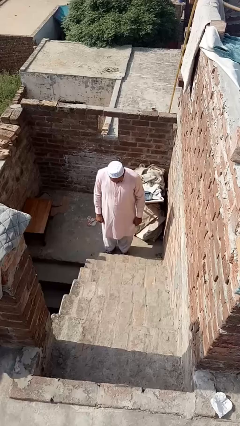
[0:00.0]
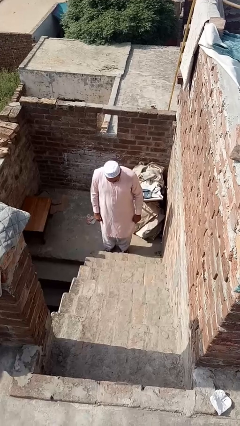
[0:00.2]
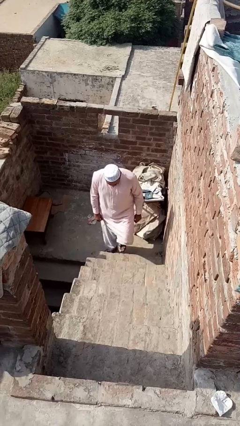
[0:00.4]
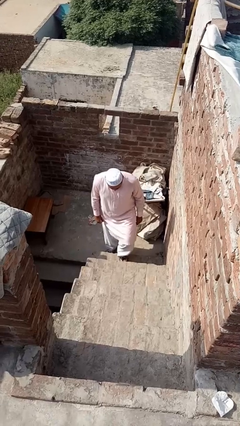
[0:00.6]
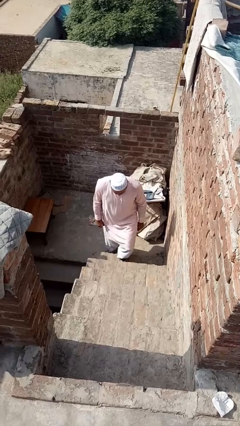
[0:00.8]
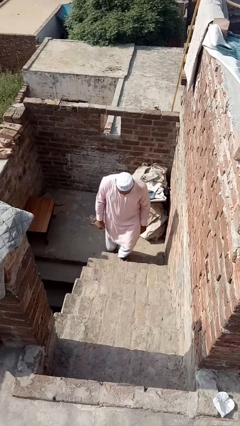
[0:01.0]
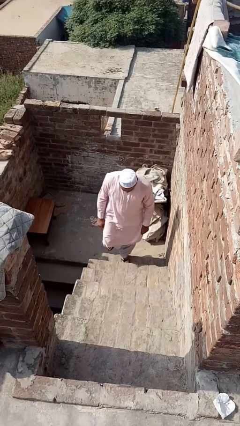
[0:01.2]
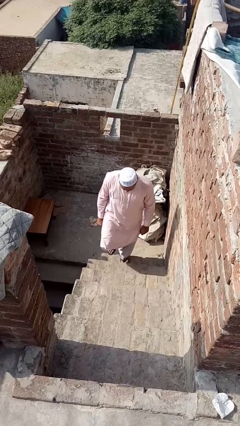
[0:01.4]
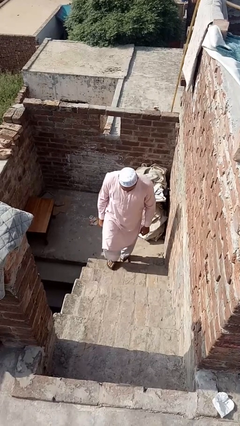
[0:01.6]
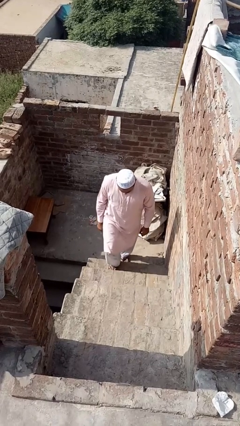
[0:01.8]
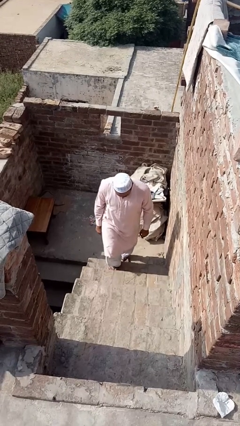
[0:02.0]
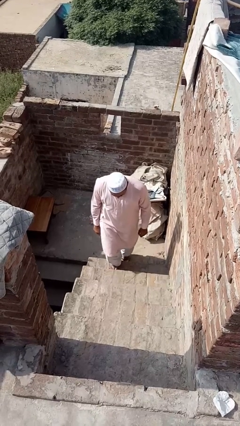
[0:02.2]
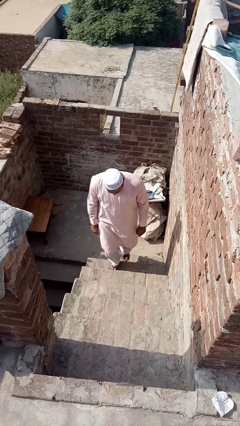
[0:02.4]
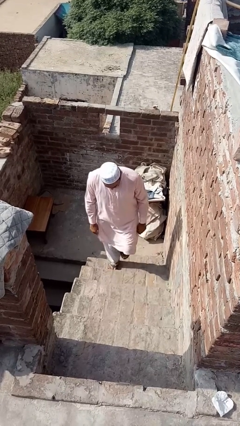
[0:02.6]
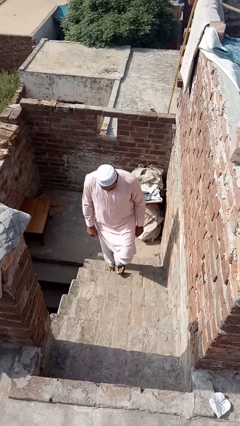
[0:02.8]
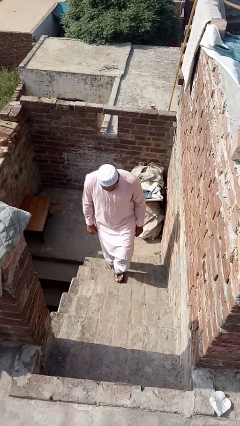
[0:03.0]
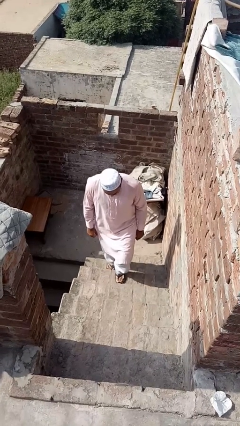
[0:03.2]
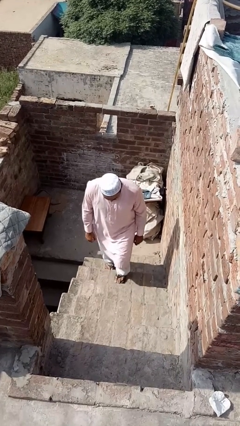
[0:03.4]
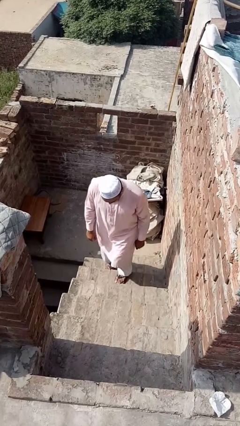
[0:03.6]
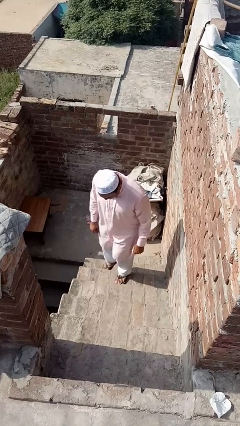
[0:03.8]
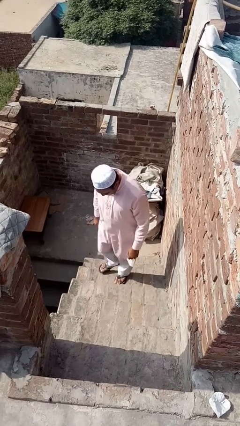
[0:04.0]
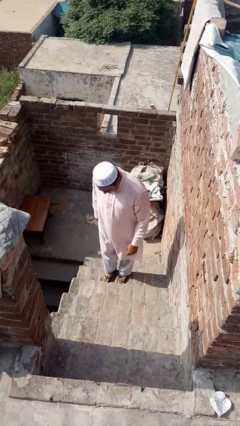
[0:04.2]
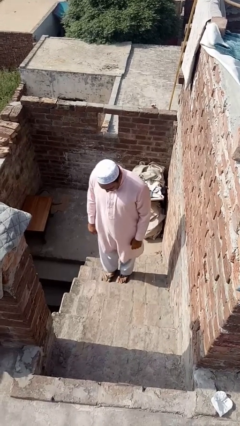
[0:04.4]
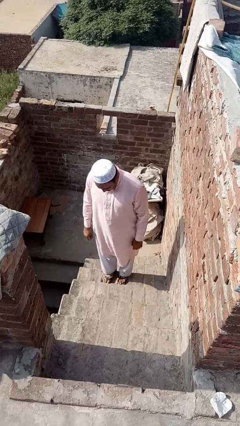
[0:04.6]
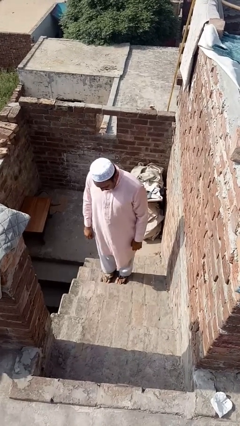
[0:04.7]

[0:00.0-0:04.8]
person climbs up ladder

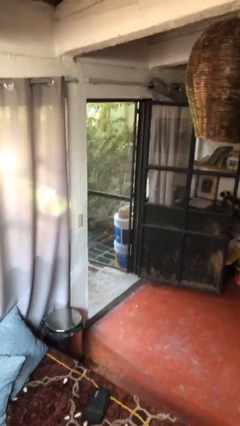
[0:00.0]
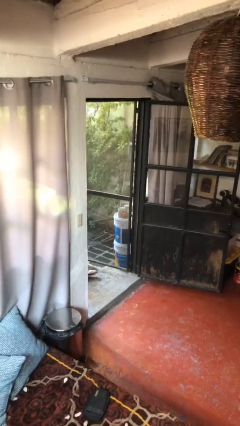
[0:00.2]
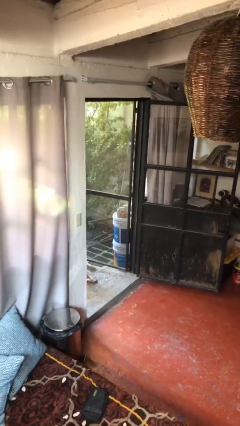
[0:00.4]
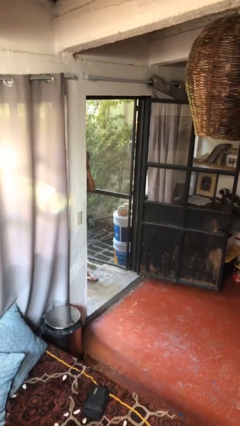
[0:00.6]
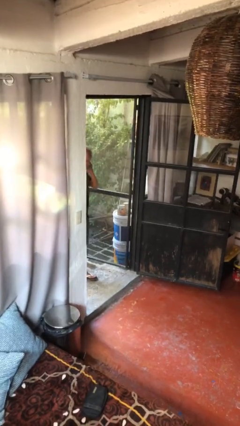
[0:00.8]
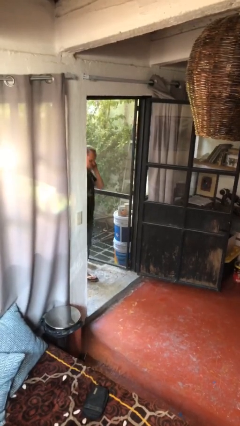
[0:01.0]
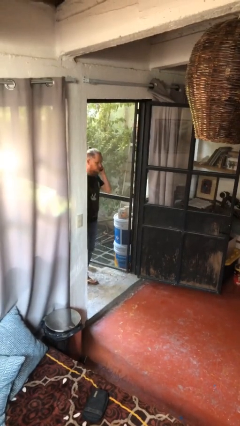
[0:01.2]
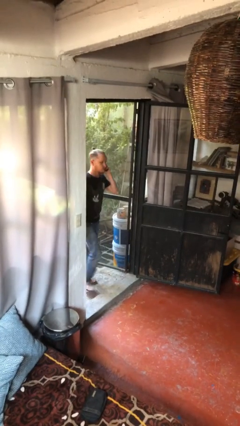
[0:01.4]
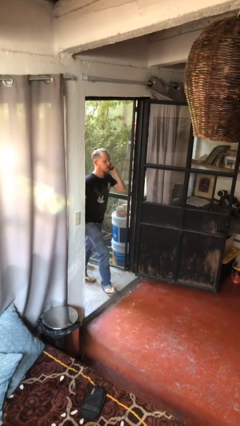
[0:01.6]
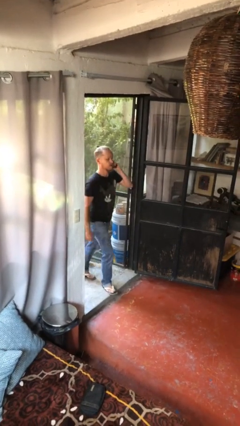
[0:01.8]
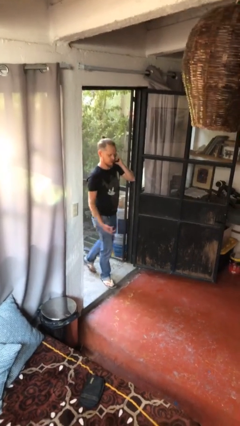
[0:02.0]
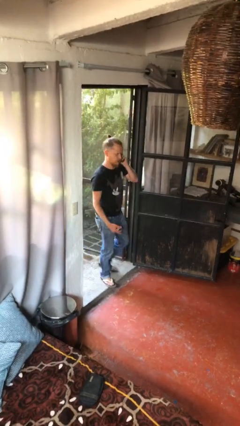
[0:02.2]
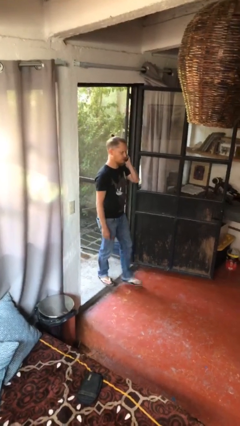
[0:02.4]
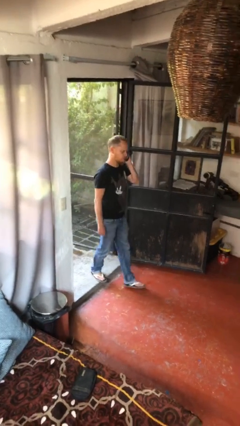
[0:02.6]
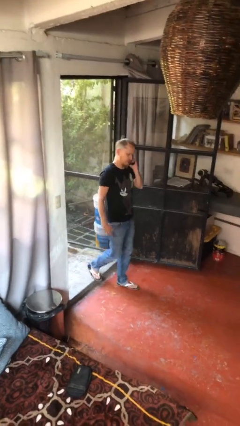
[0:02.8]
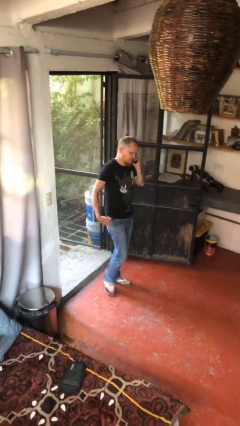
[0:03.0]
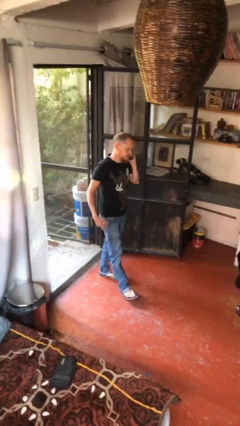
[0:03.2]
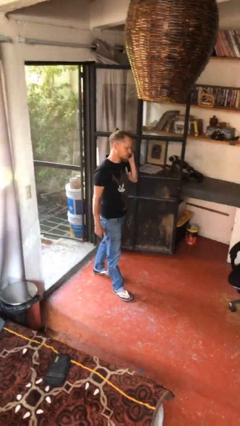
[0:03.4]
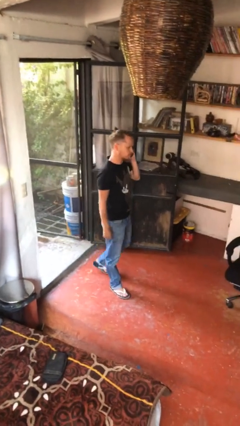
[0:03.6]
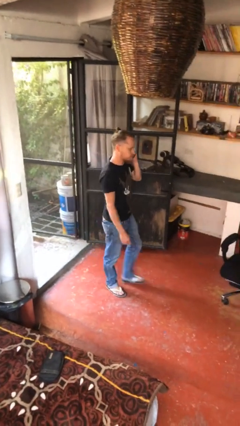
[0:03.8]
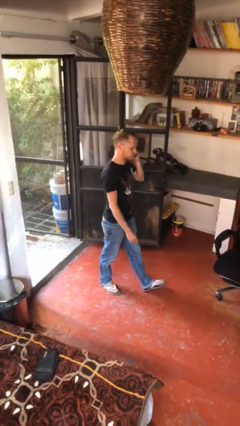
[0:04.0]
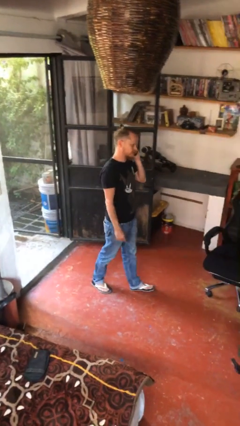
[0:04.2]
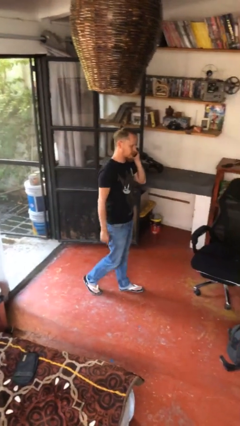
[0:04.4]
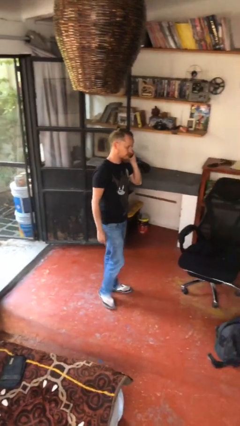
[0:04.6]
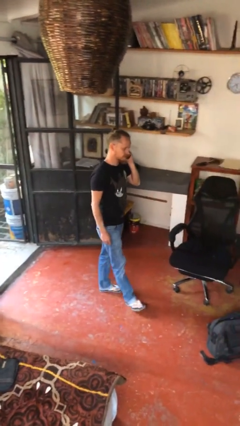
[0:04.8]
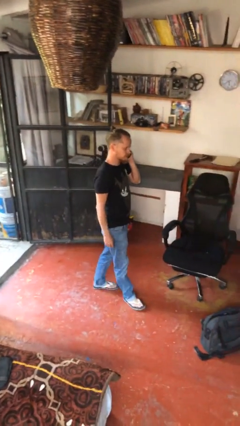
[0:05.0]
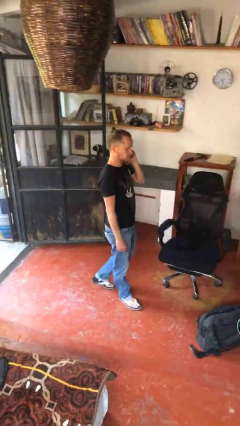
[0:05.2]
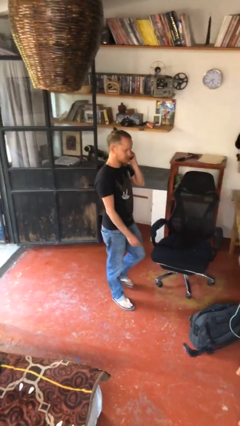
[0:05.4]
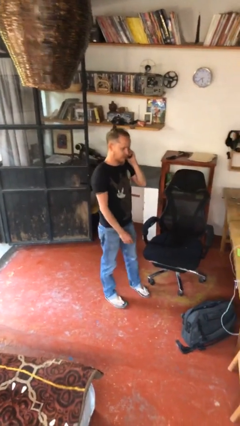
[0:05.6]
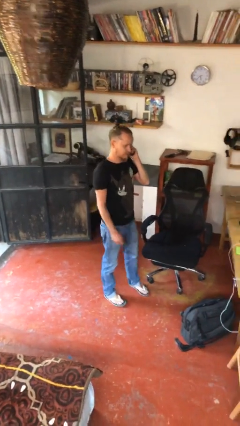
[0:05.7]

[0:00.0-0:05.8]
person enters scene through structure

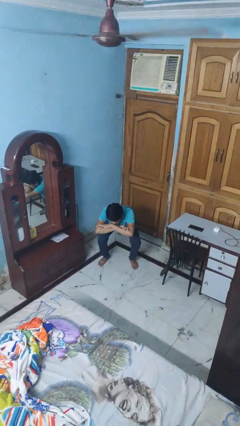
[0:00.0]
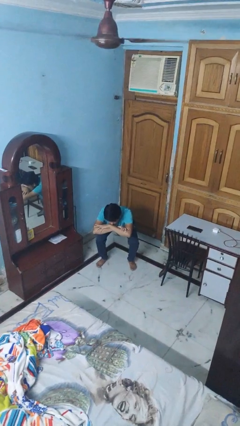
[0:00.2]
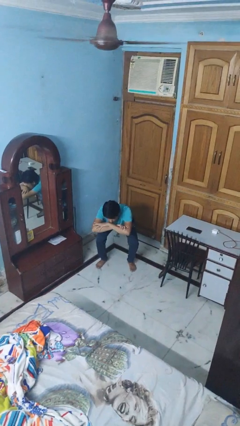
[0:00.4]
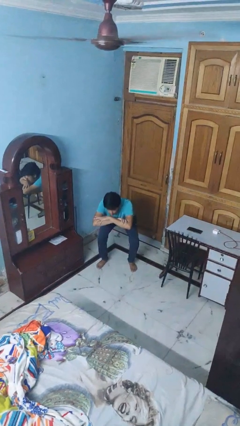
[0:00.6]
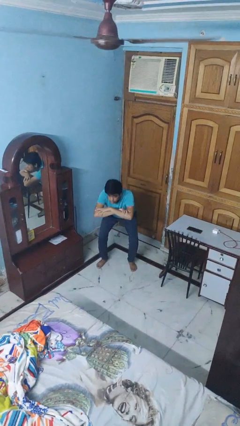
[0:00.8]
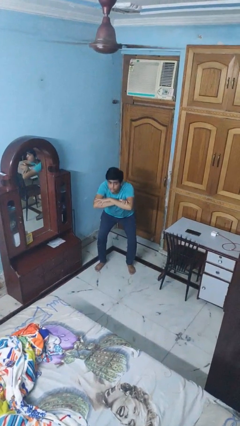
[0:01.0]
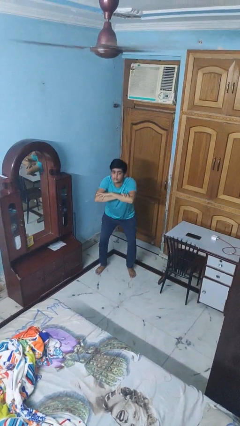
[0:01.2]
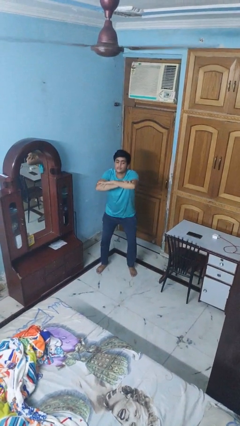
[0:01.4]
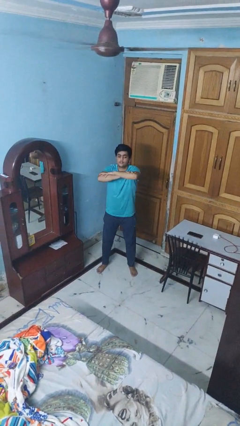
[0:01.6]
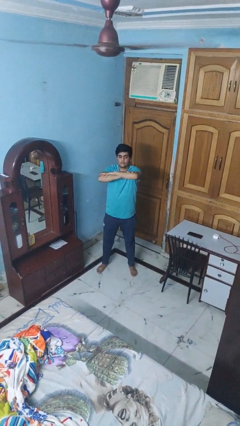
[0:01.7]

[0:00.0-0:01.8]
person stands up

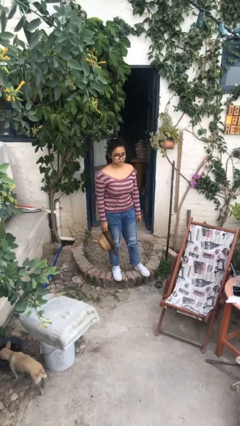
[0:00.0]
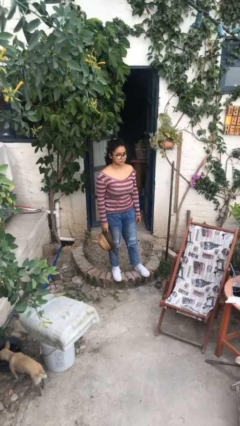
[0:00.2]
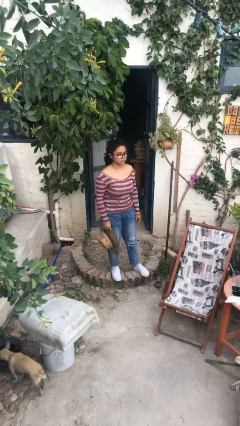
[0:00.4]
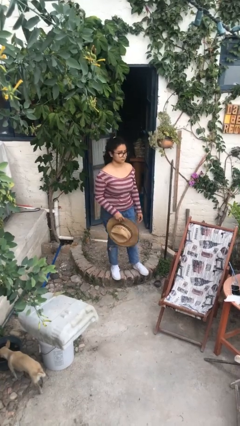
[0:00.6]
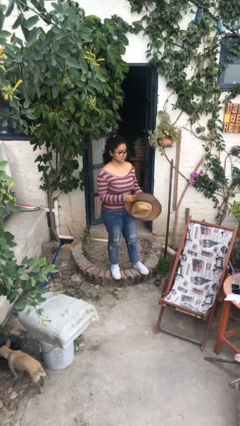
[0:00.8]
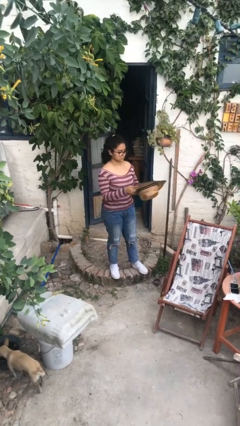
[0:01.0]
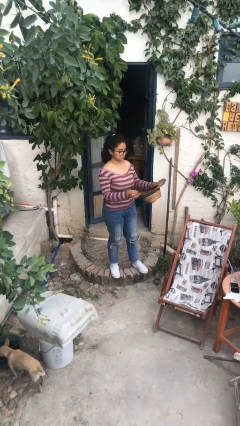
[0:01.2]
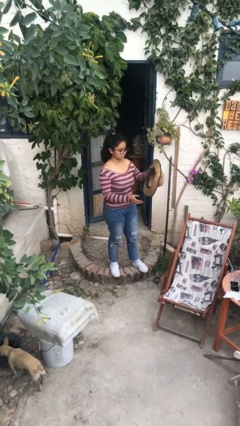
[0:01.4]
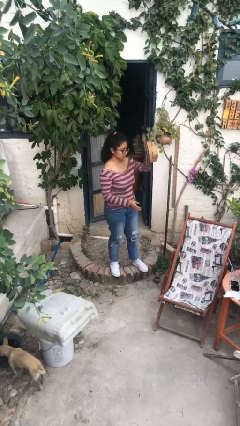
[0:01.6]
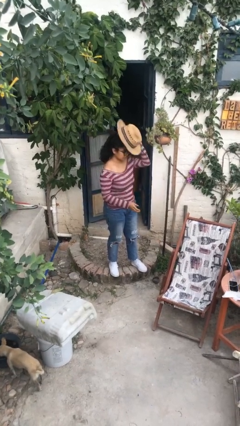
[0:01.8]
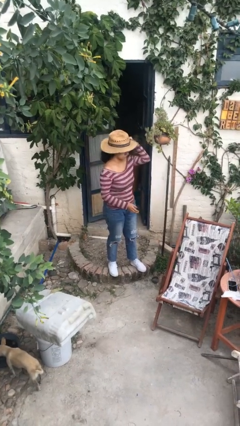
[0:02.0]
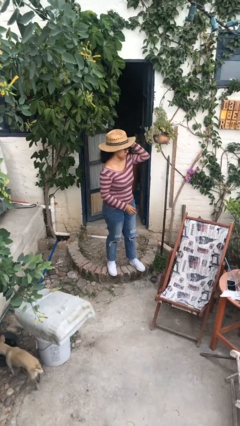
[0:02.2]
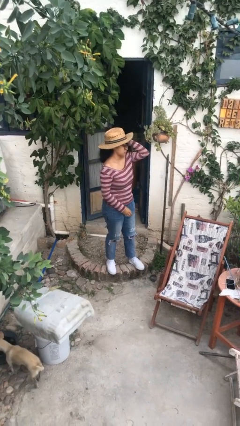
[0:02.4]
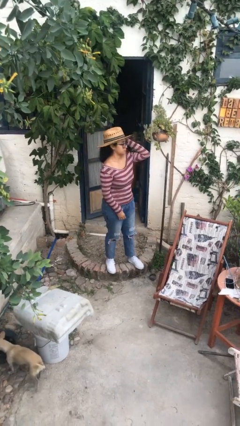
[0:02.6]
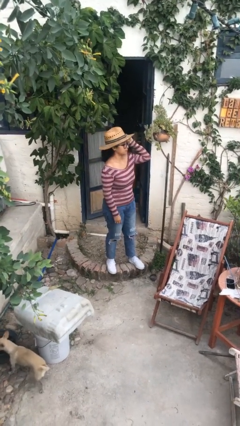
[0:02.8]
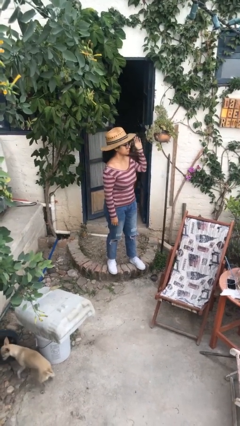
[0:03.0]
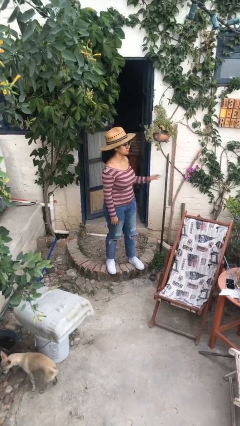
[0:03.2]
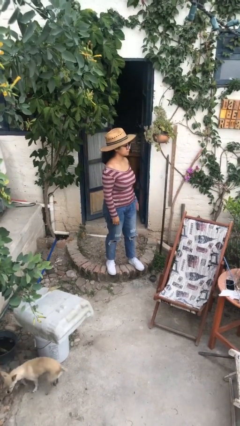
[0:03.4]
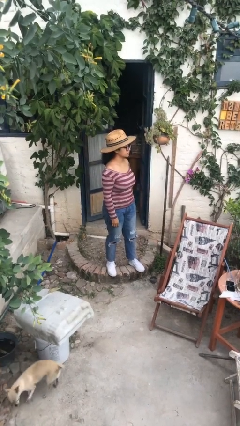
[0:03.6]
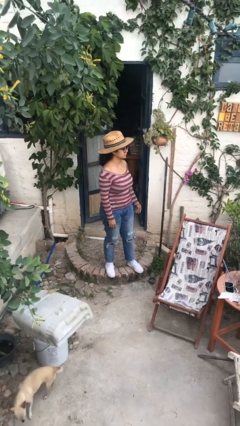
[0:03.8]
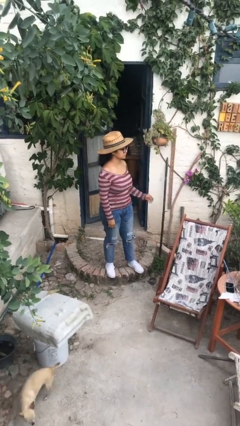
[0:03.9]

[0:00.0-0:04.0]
person puts on hat

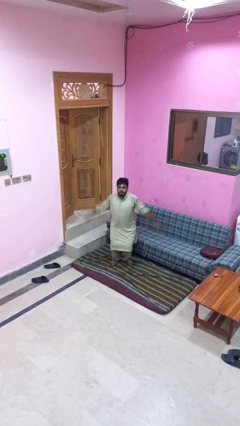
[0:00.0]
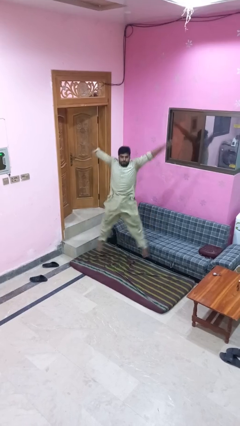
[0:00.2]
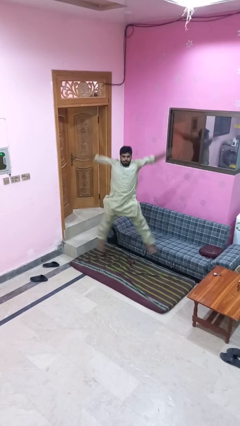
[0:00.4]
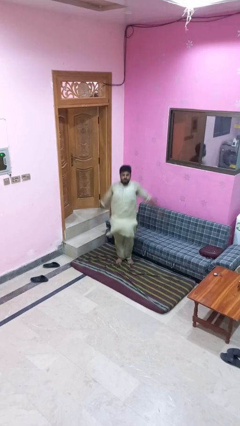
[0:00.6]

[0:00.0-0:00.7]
person exercises with jumping jacks

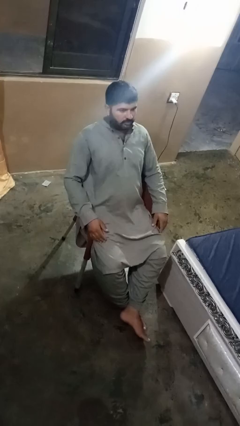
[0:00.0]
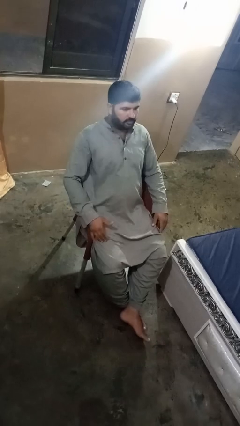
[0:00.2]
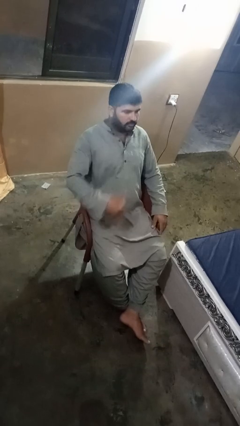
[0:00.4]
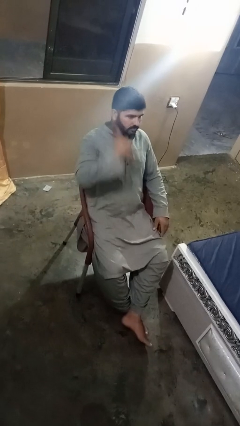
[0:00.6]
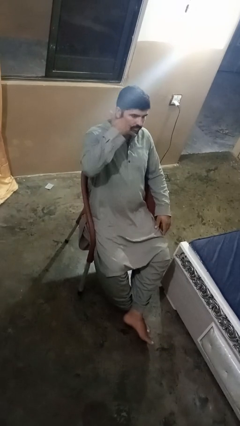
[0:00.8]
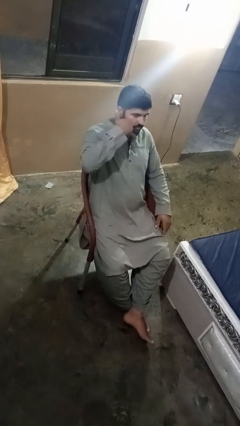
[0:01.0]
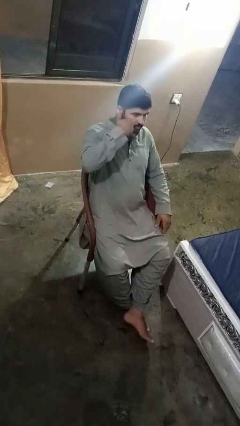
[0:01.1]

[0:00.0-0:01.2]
person gestures call me
